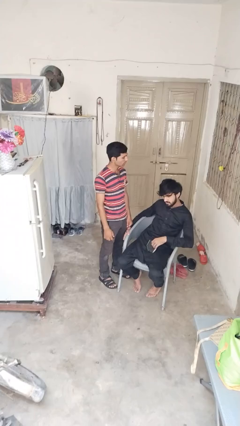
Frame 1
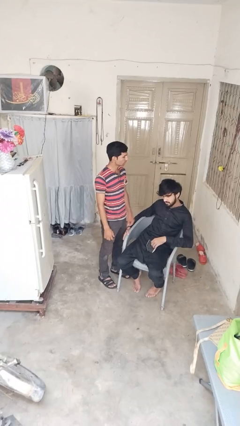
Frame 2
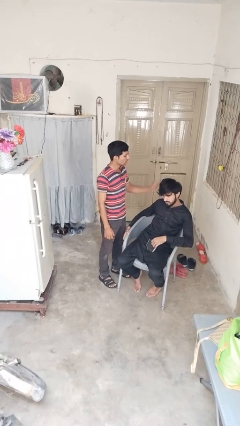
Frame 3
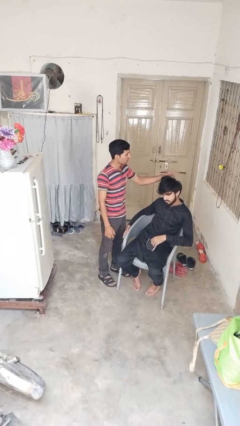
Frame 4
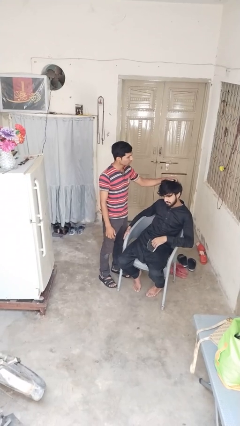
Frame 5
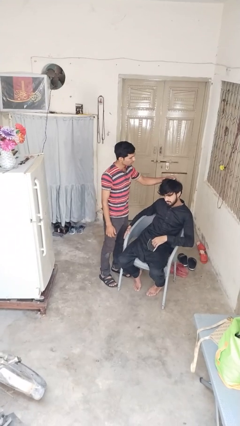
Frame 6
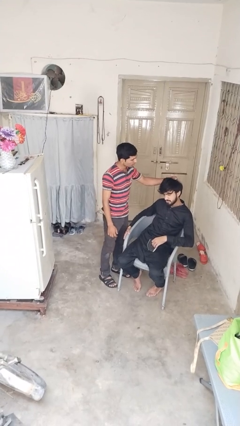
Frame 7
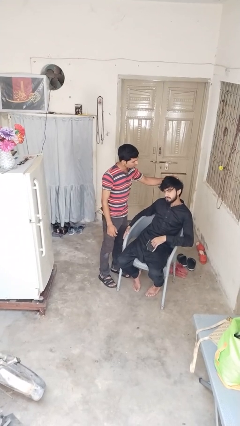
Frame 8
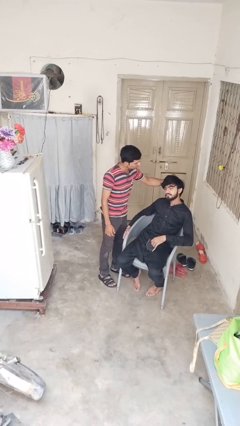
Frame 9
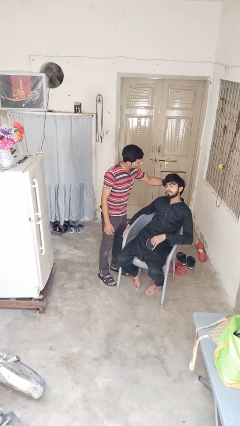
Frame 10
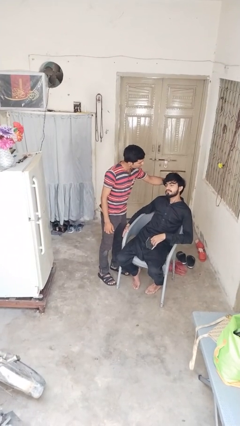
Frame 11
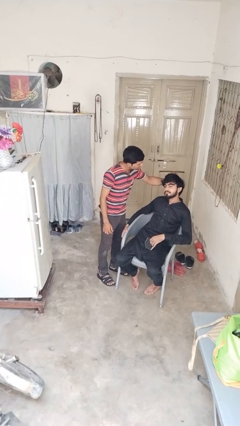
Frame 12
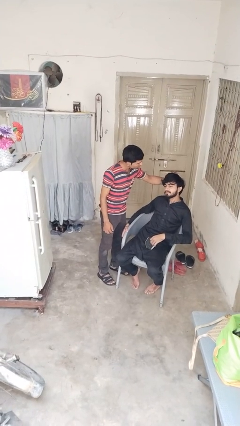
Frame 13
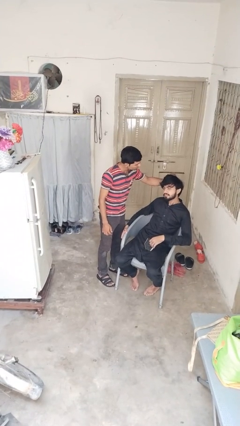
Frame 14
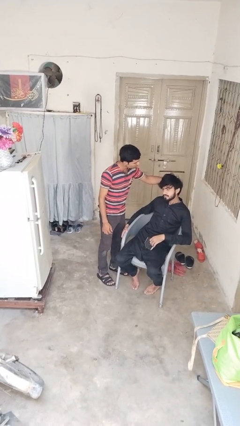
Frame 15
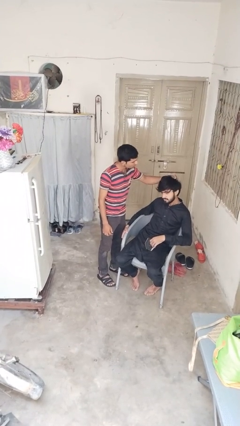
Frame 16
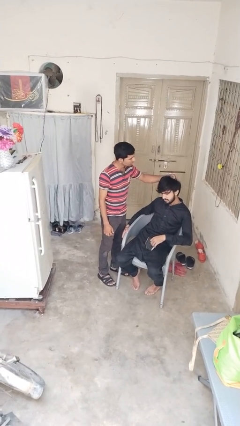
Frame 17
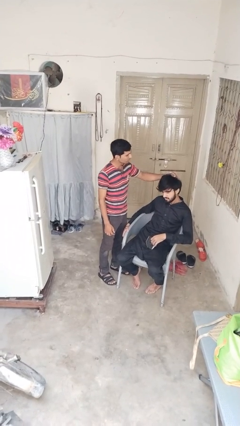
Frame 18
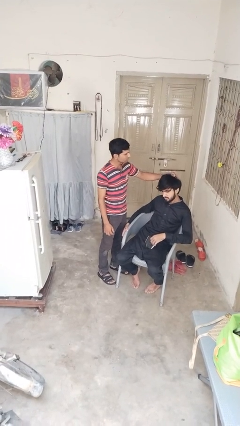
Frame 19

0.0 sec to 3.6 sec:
person grabs person by hair

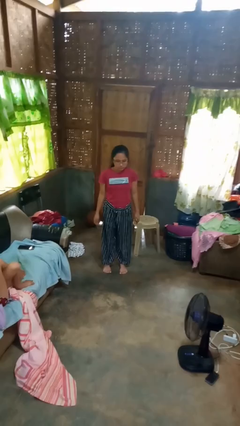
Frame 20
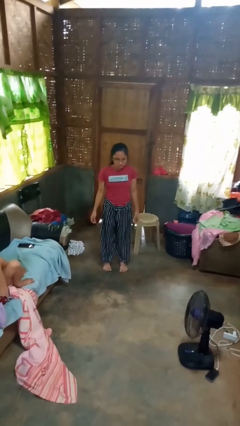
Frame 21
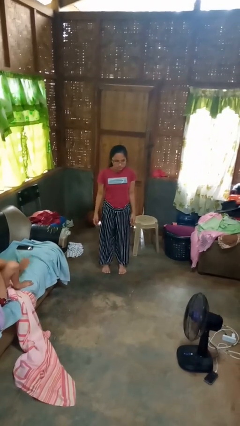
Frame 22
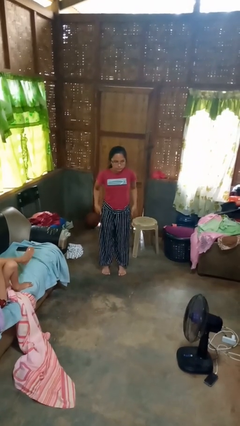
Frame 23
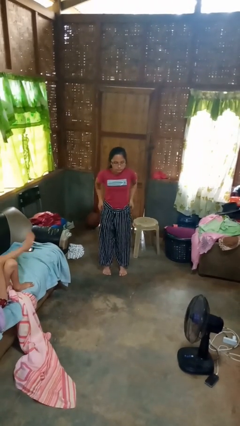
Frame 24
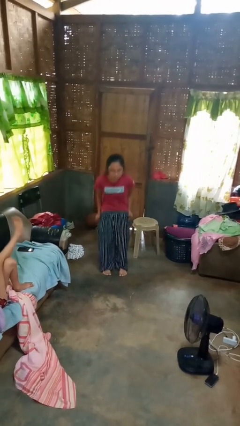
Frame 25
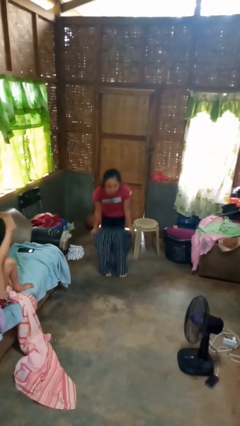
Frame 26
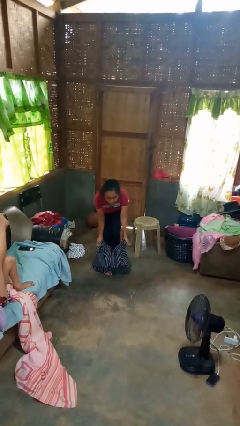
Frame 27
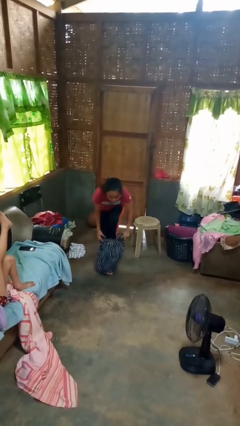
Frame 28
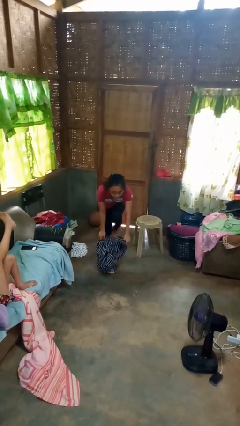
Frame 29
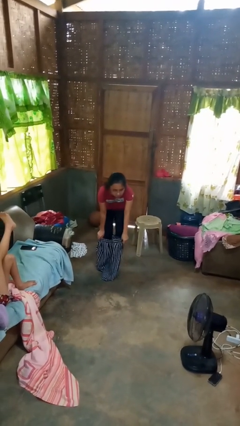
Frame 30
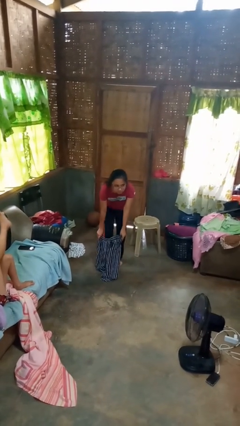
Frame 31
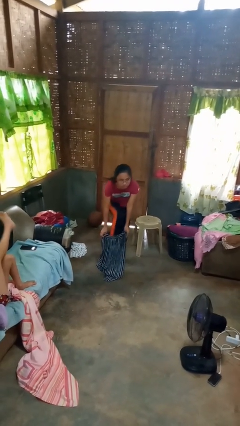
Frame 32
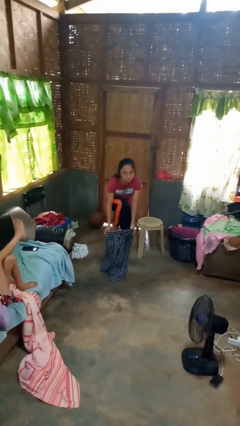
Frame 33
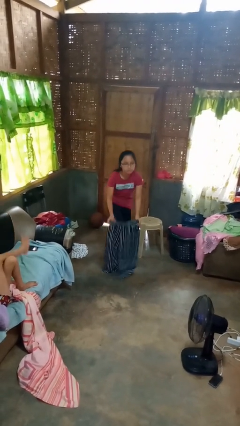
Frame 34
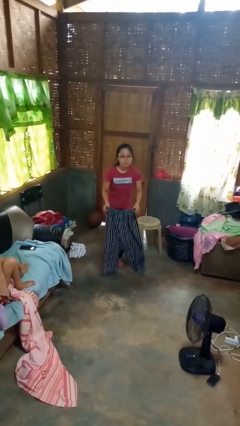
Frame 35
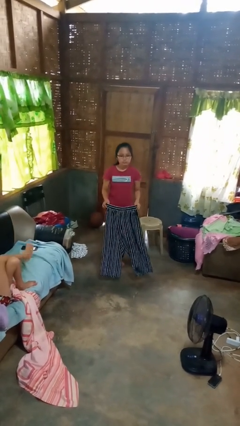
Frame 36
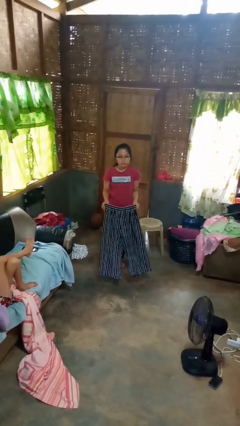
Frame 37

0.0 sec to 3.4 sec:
person takes off pants

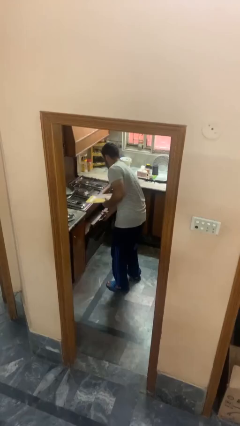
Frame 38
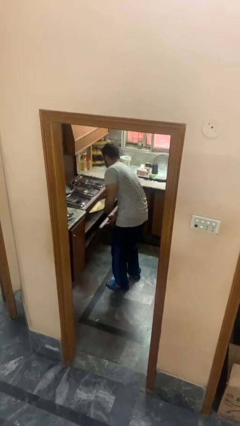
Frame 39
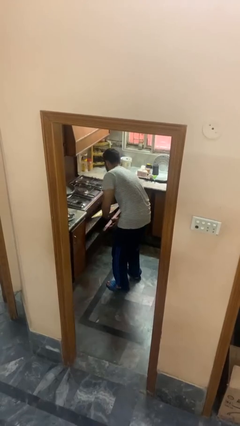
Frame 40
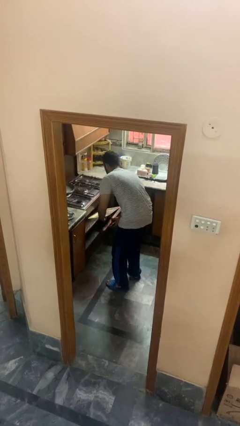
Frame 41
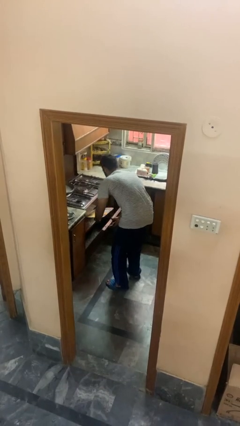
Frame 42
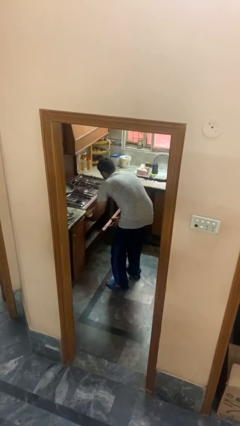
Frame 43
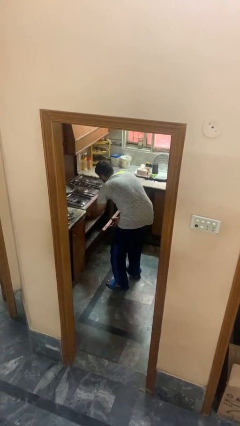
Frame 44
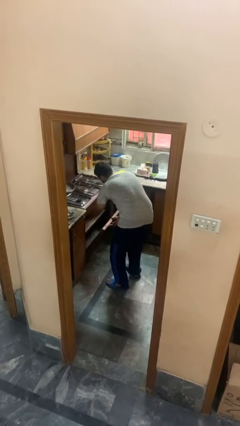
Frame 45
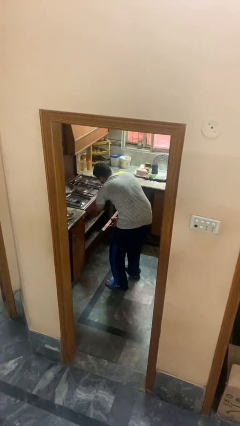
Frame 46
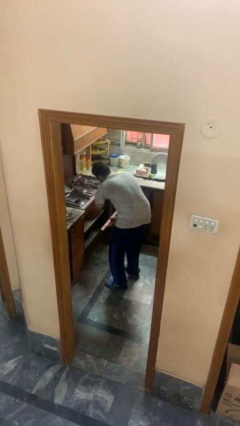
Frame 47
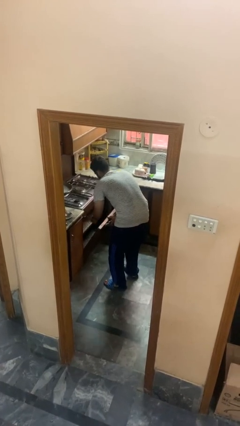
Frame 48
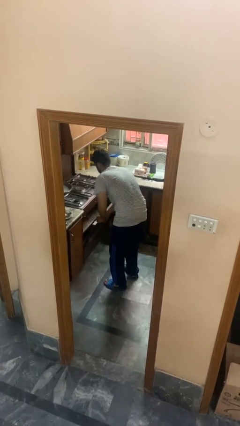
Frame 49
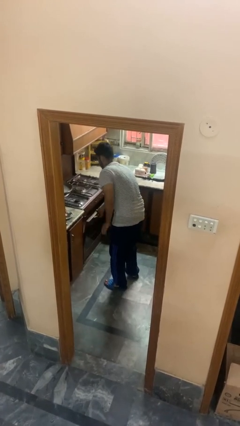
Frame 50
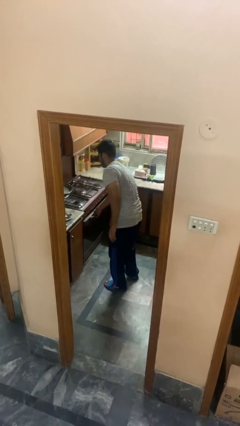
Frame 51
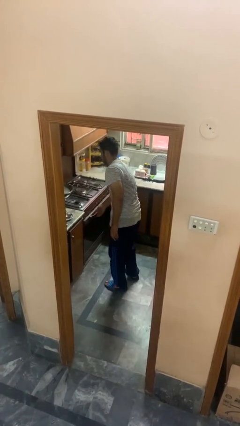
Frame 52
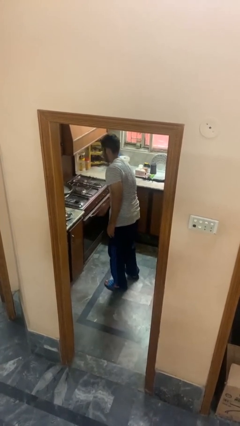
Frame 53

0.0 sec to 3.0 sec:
person puts object into oven

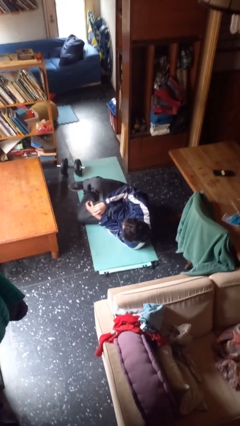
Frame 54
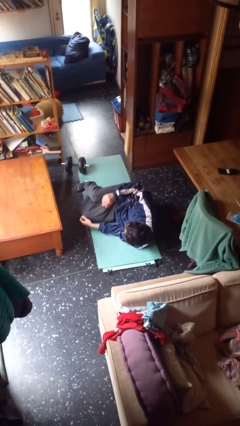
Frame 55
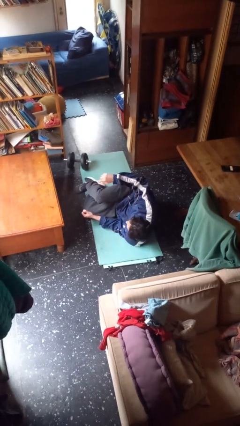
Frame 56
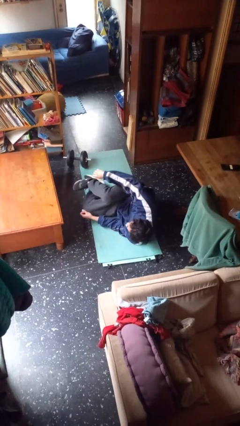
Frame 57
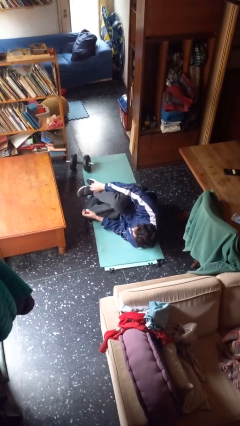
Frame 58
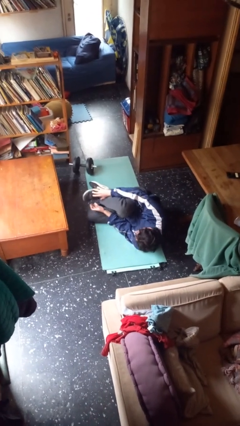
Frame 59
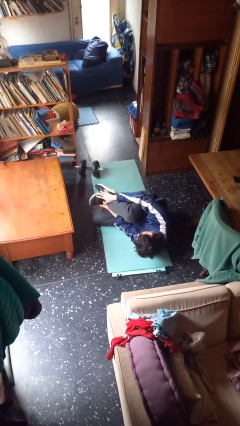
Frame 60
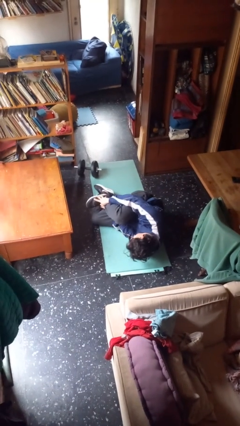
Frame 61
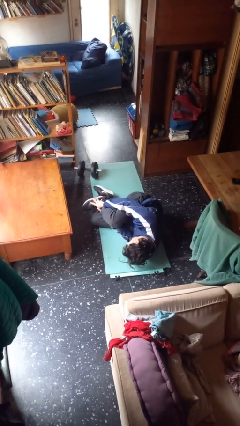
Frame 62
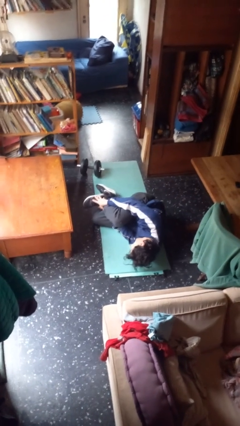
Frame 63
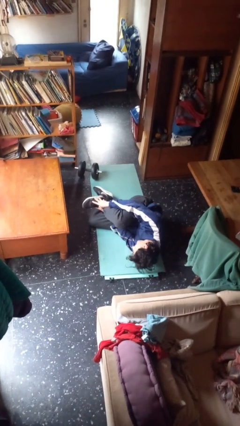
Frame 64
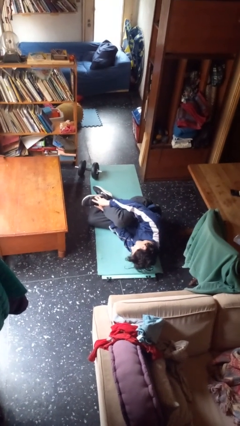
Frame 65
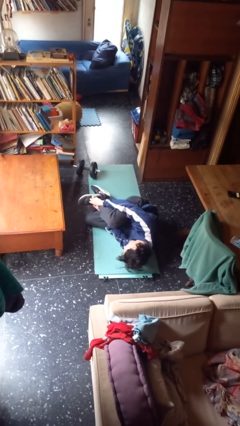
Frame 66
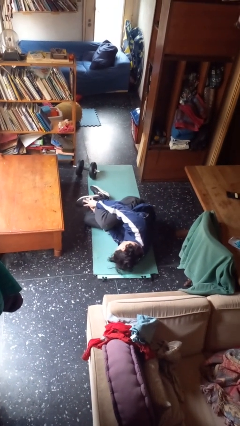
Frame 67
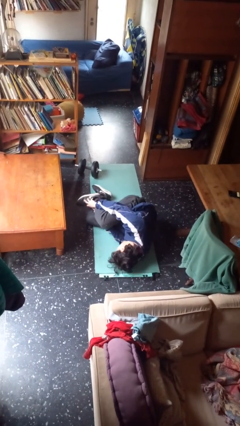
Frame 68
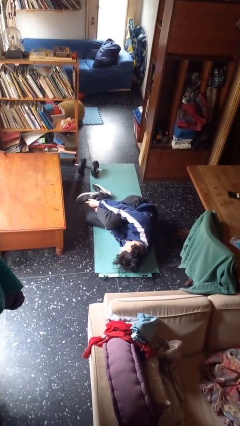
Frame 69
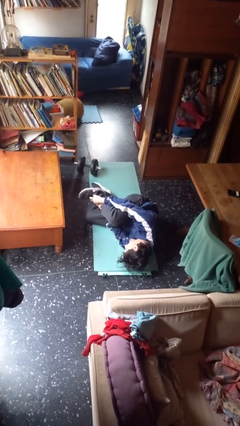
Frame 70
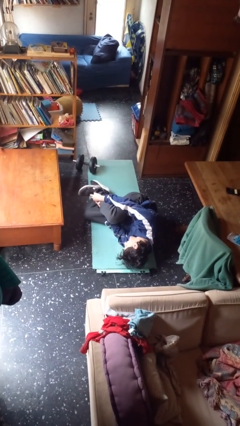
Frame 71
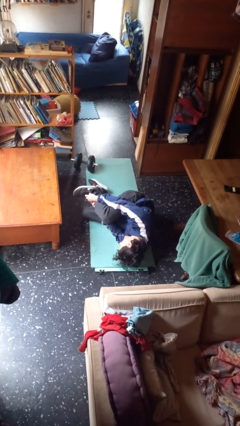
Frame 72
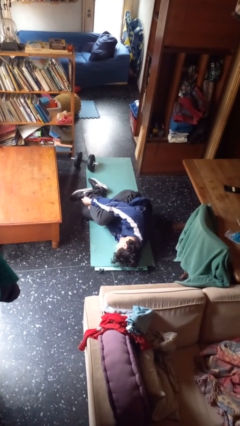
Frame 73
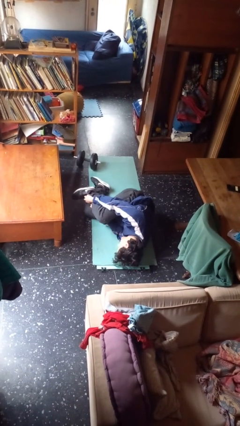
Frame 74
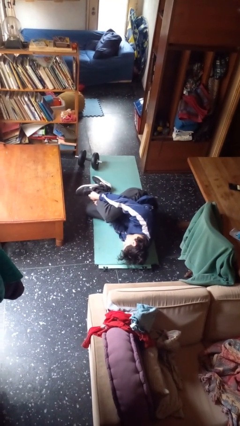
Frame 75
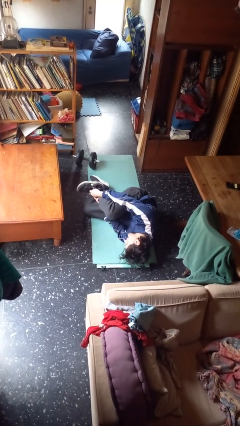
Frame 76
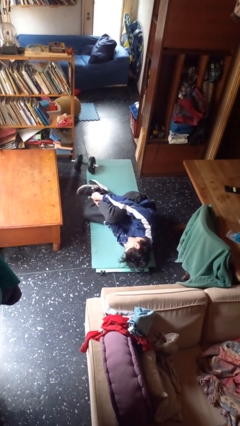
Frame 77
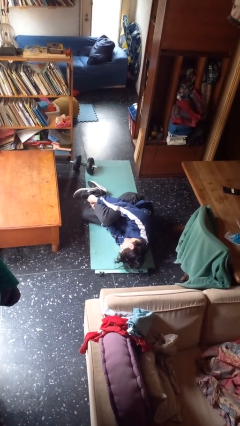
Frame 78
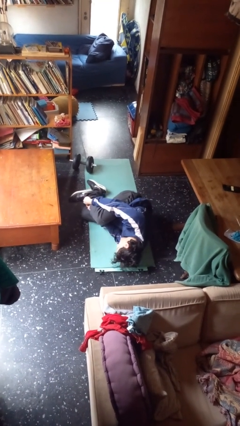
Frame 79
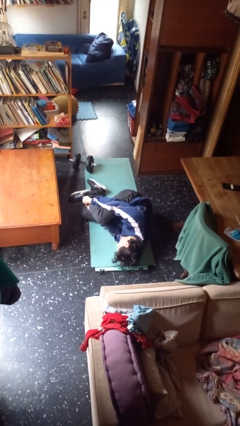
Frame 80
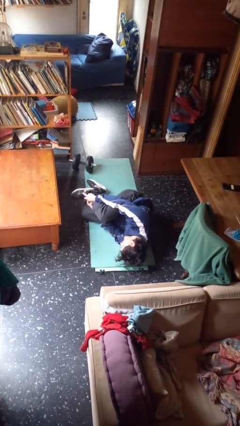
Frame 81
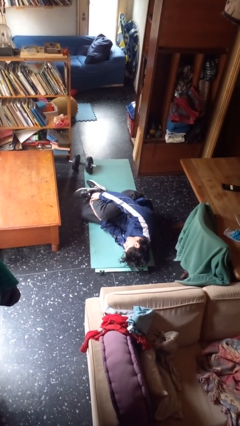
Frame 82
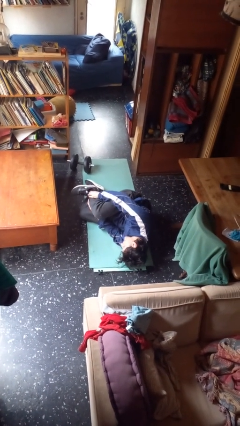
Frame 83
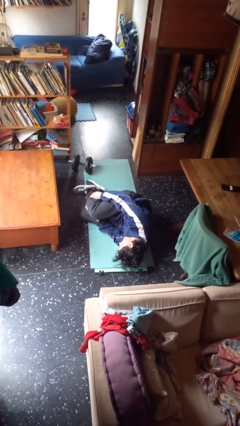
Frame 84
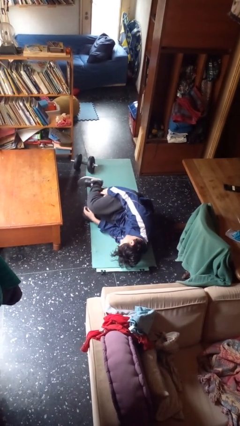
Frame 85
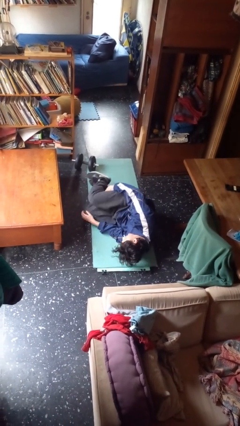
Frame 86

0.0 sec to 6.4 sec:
person lies down on floor

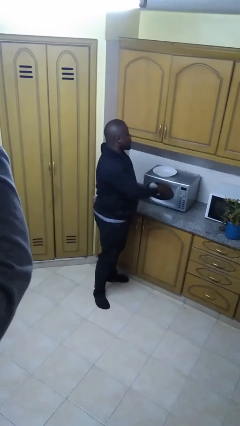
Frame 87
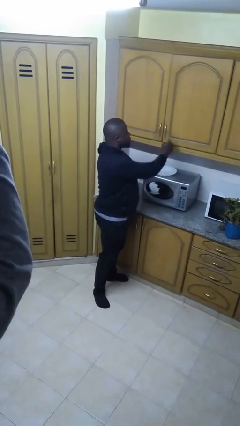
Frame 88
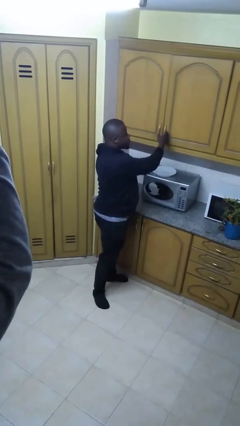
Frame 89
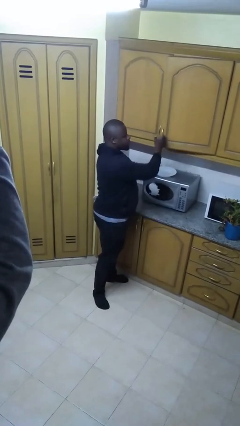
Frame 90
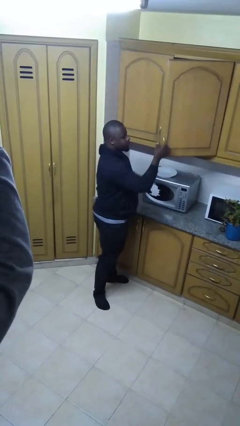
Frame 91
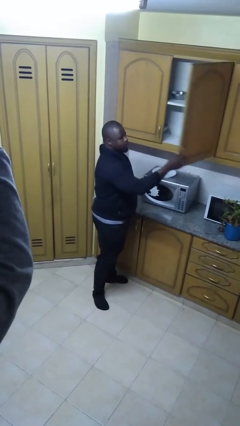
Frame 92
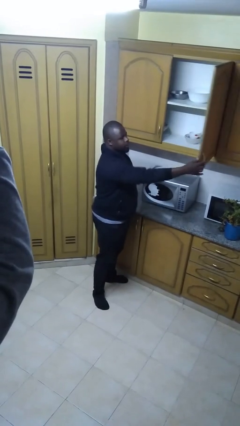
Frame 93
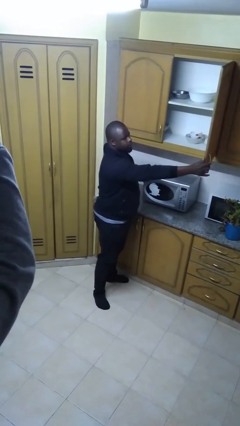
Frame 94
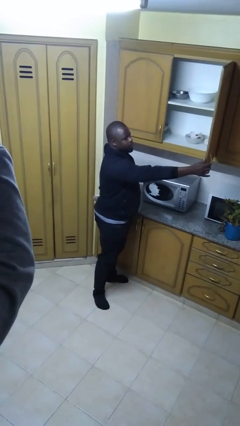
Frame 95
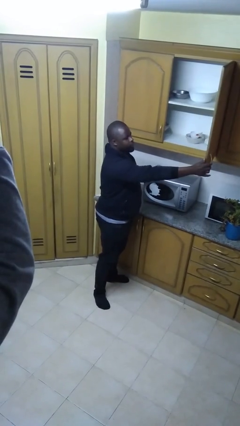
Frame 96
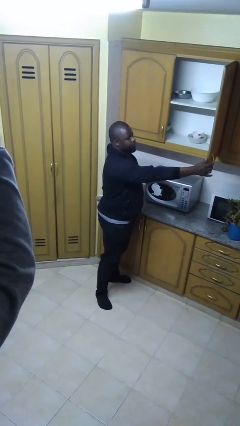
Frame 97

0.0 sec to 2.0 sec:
person opens cabinet
